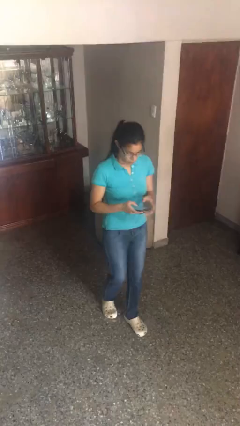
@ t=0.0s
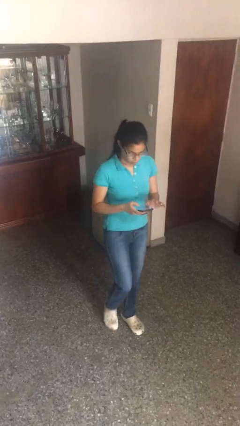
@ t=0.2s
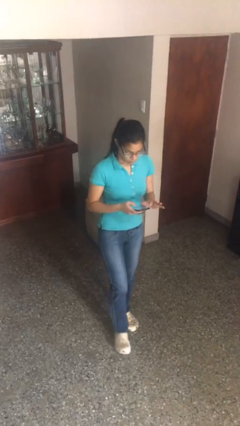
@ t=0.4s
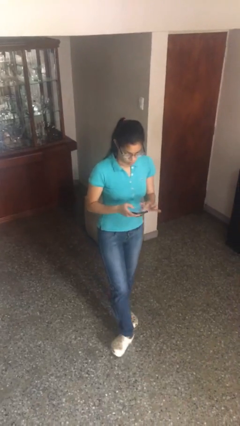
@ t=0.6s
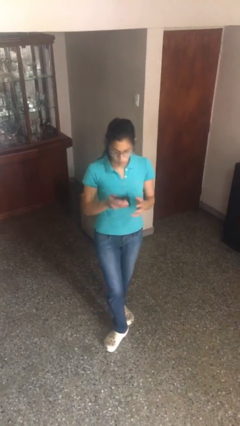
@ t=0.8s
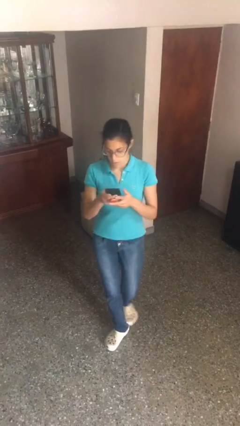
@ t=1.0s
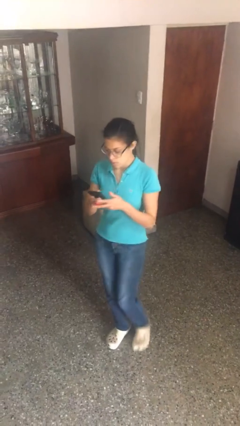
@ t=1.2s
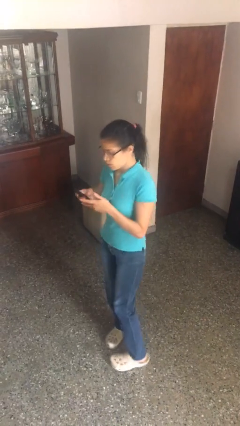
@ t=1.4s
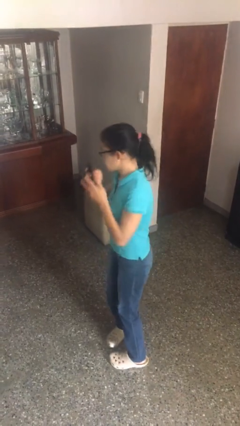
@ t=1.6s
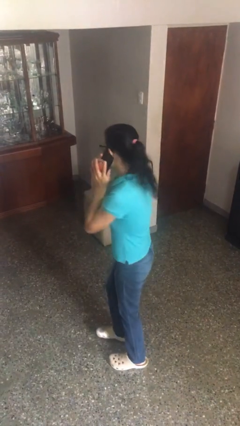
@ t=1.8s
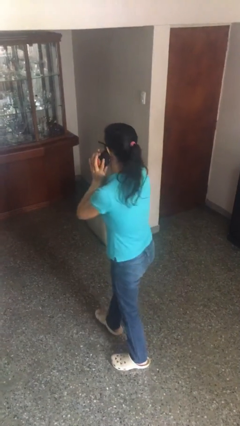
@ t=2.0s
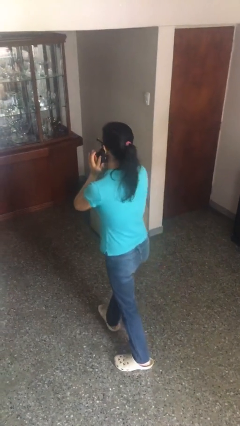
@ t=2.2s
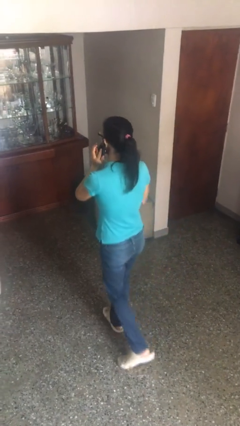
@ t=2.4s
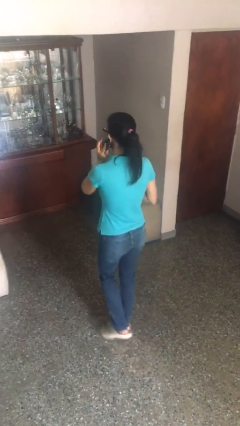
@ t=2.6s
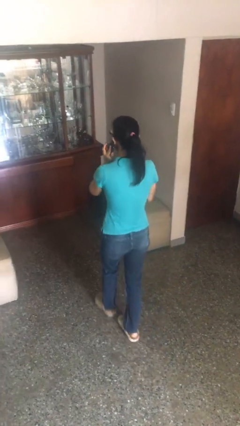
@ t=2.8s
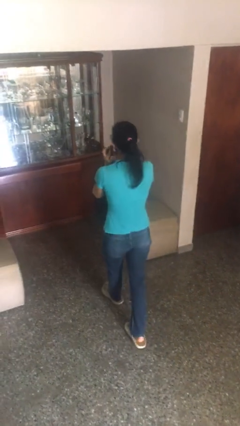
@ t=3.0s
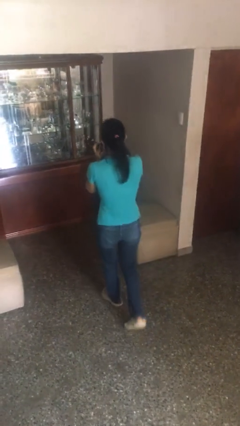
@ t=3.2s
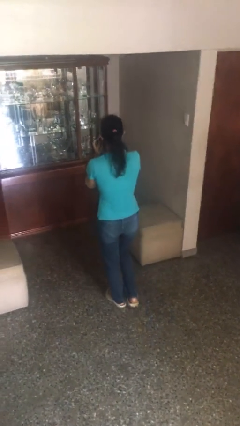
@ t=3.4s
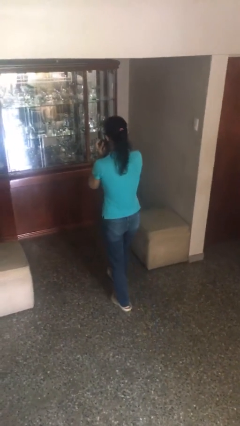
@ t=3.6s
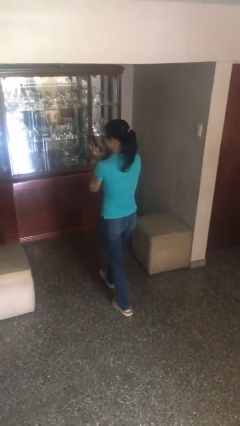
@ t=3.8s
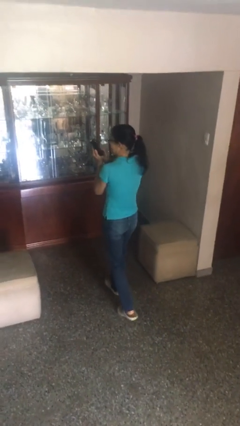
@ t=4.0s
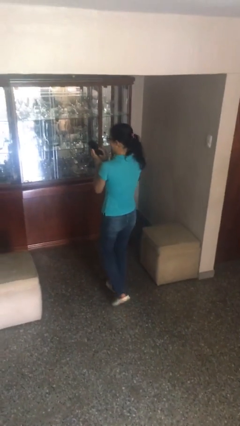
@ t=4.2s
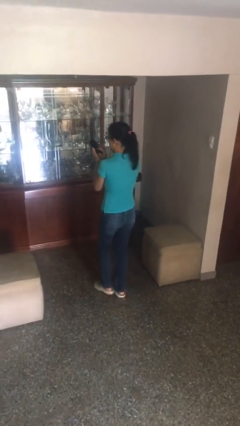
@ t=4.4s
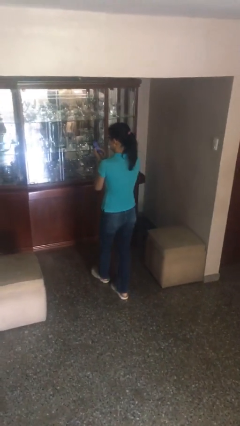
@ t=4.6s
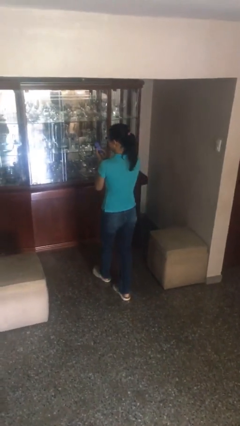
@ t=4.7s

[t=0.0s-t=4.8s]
person talks on phone

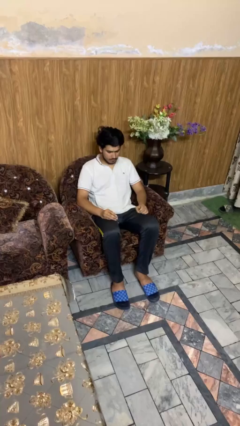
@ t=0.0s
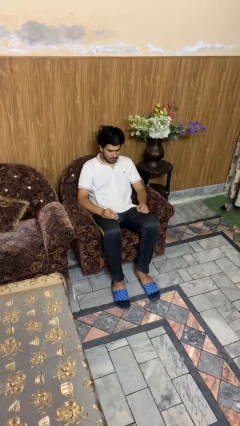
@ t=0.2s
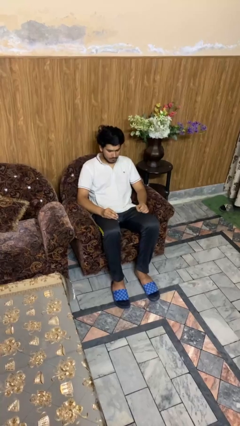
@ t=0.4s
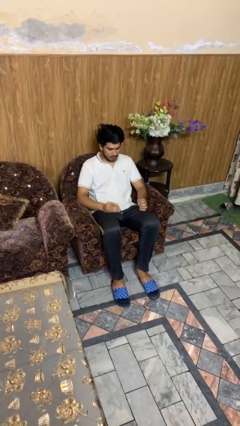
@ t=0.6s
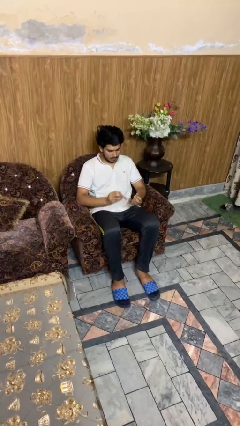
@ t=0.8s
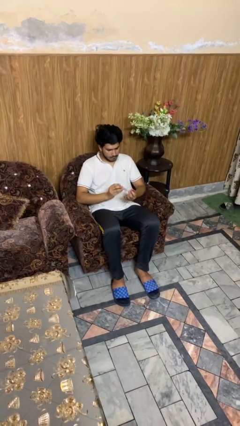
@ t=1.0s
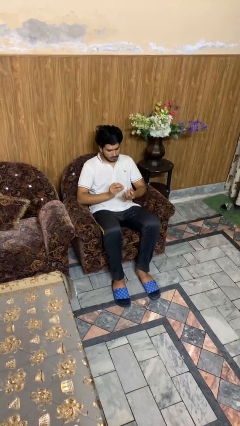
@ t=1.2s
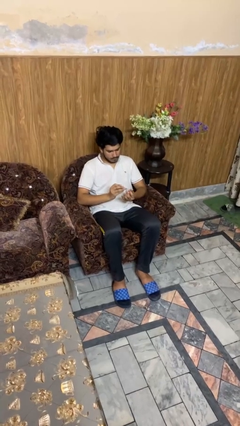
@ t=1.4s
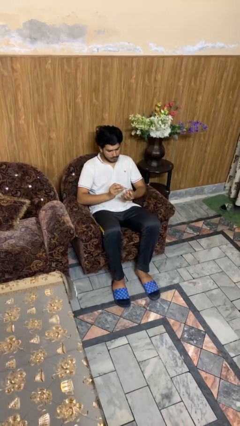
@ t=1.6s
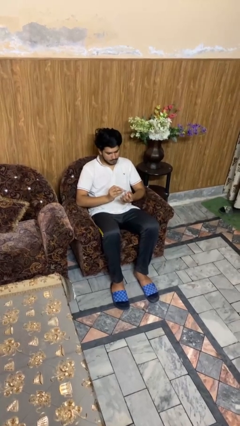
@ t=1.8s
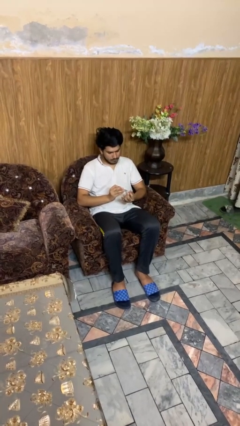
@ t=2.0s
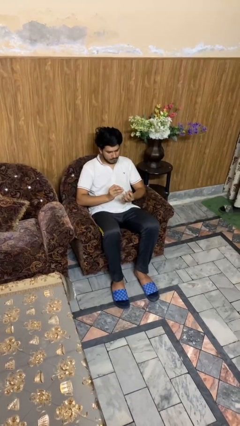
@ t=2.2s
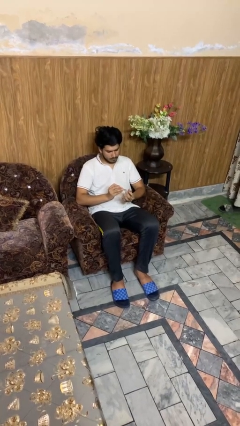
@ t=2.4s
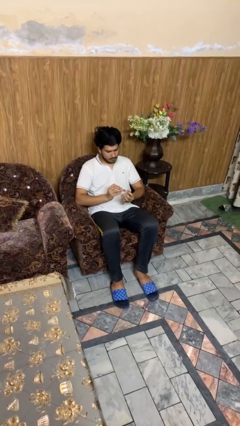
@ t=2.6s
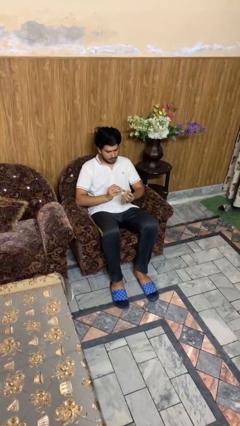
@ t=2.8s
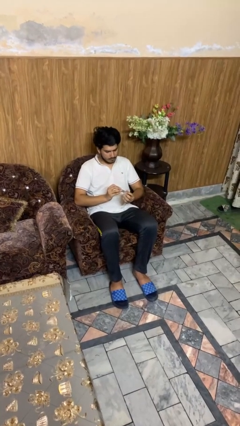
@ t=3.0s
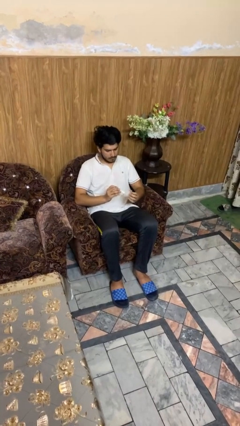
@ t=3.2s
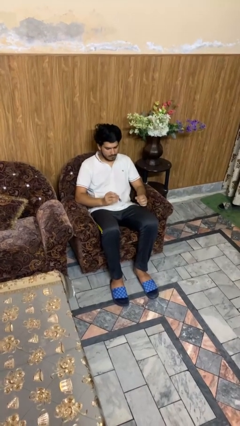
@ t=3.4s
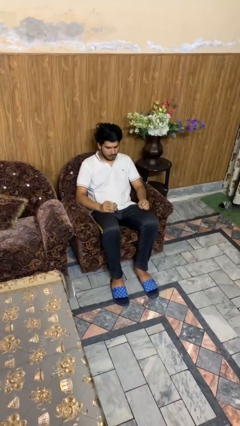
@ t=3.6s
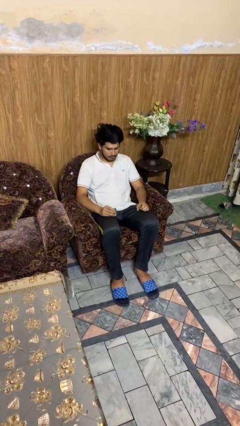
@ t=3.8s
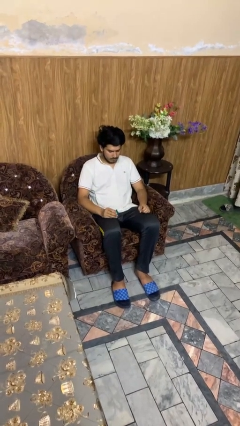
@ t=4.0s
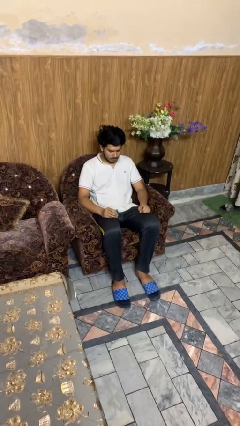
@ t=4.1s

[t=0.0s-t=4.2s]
person clips fingernails

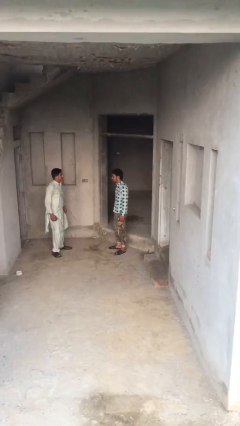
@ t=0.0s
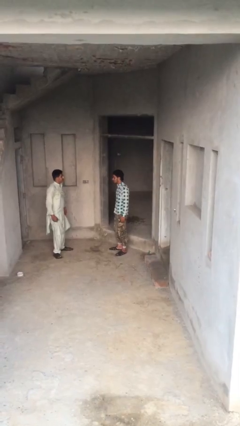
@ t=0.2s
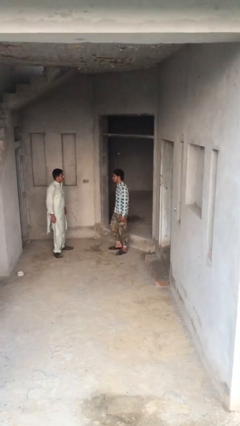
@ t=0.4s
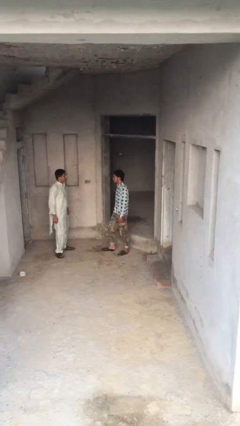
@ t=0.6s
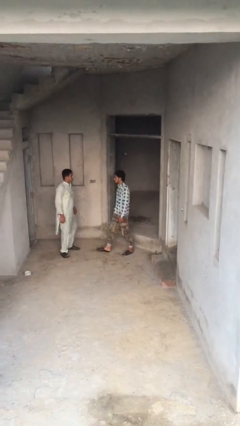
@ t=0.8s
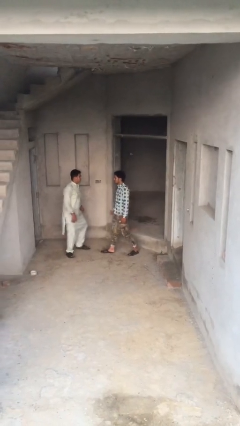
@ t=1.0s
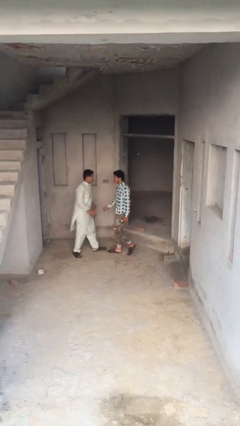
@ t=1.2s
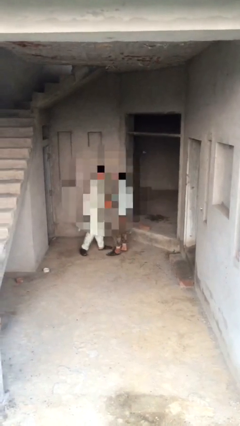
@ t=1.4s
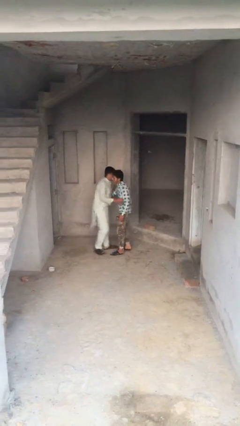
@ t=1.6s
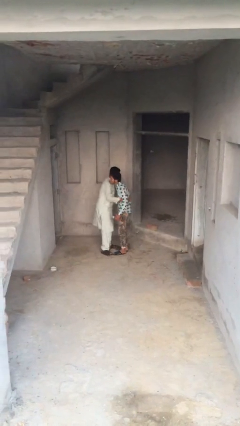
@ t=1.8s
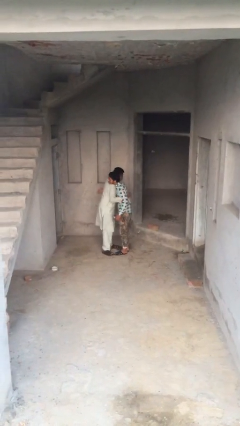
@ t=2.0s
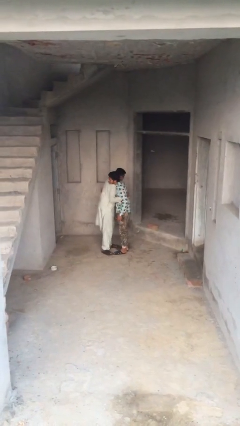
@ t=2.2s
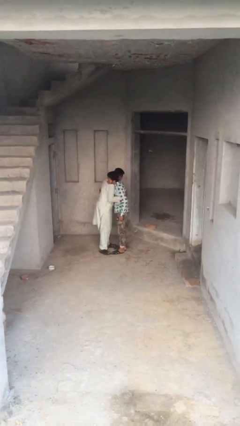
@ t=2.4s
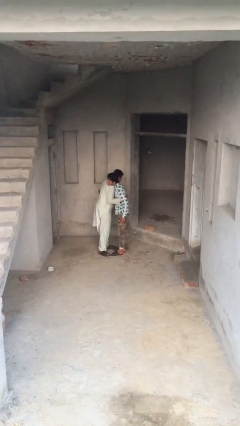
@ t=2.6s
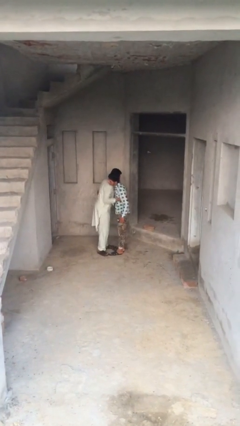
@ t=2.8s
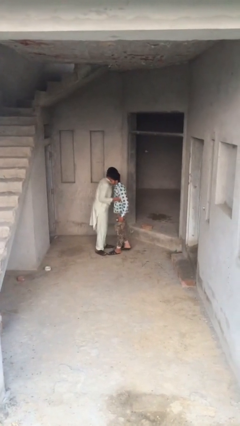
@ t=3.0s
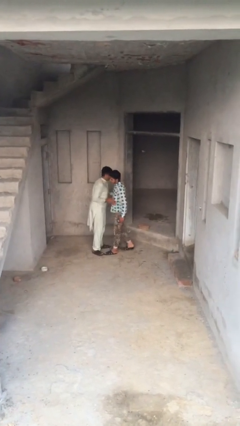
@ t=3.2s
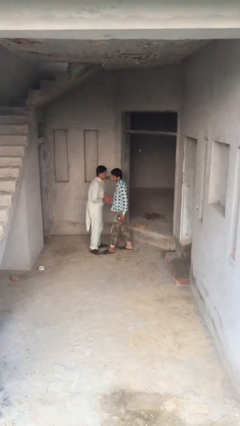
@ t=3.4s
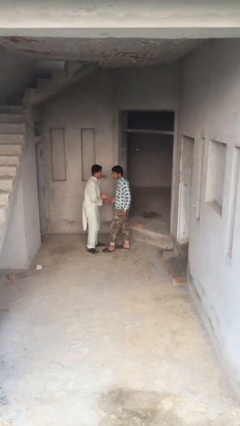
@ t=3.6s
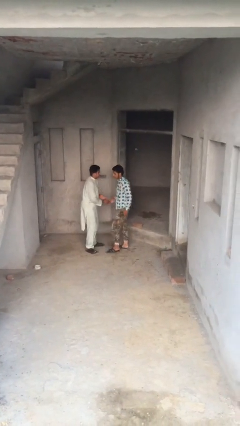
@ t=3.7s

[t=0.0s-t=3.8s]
person embraces person

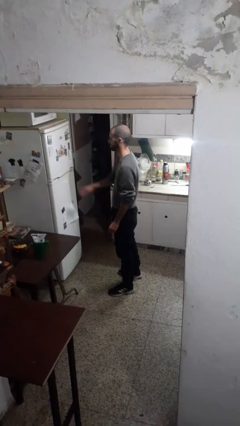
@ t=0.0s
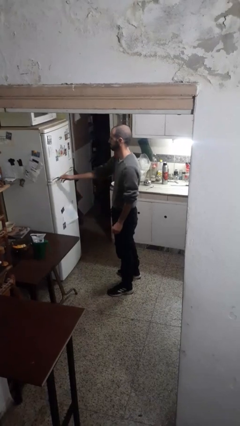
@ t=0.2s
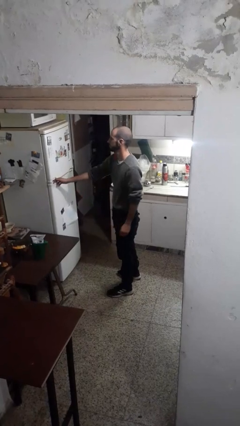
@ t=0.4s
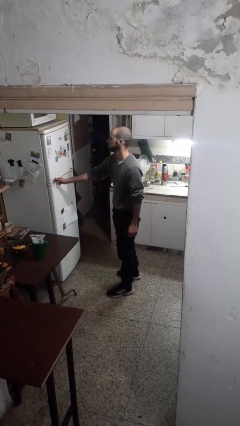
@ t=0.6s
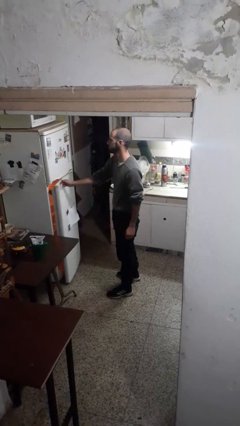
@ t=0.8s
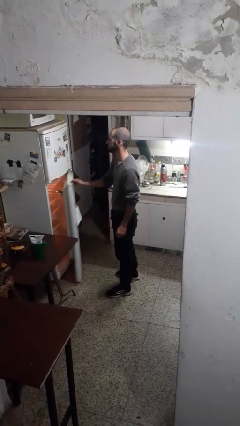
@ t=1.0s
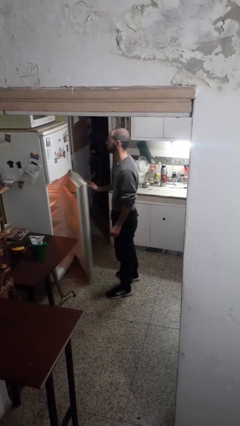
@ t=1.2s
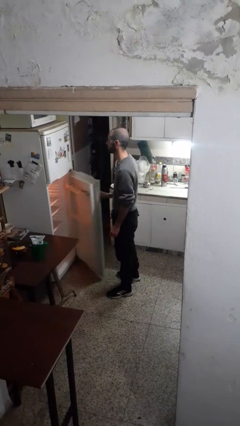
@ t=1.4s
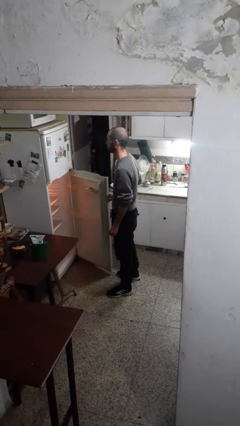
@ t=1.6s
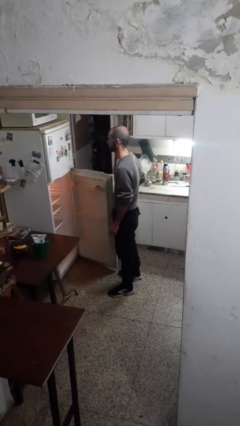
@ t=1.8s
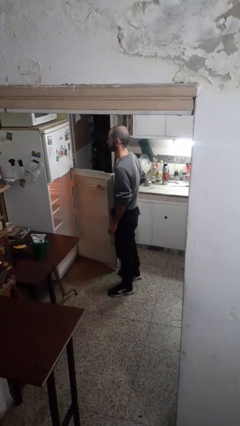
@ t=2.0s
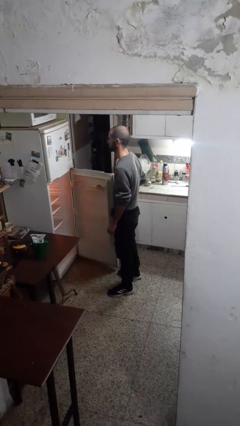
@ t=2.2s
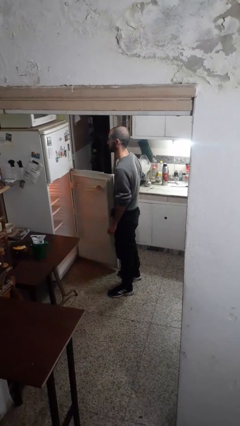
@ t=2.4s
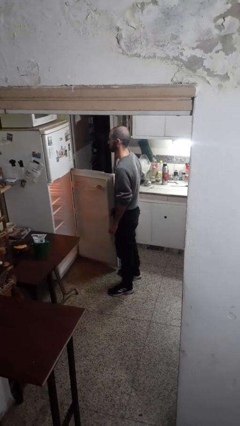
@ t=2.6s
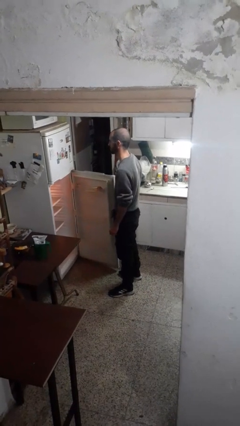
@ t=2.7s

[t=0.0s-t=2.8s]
person opens refrigerator

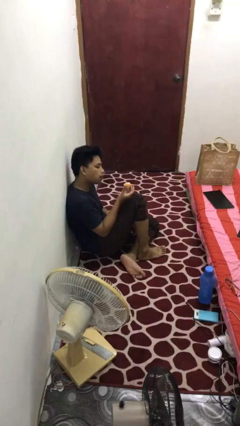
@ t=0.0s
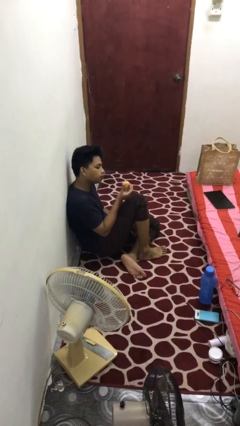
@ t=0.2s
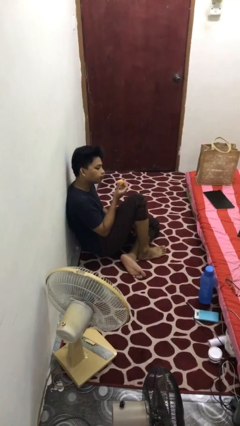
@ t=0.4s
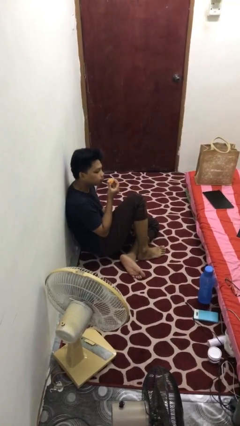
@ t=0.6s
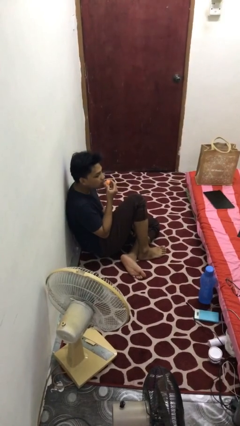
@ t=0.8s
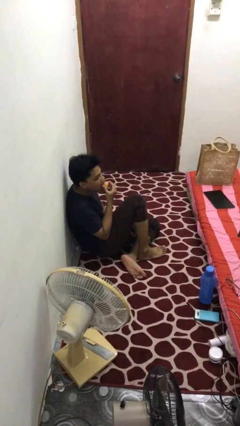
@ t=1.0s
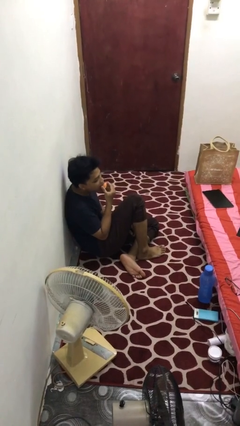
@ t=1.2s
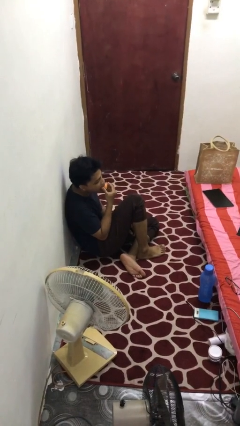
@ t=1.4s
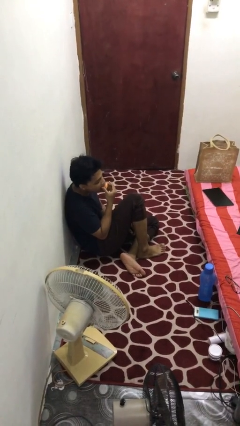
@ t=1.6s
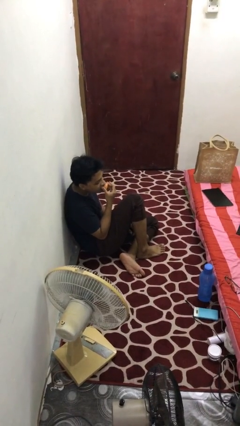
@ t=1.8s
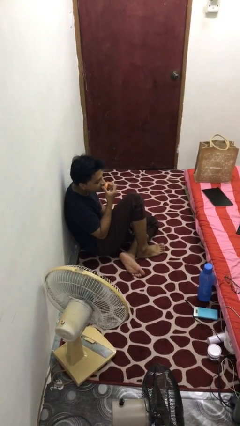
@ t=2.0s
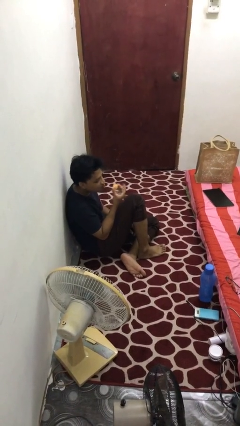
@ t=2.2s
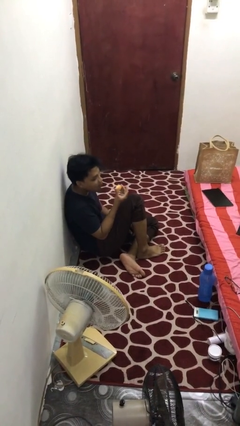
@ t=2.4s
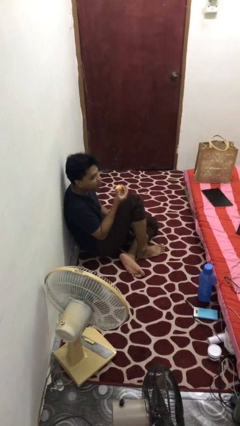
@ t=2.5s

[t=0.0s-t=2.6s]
person eats apple
